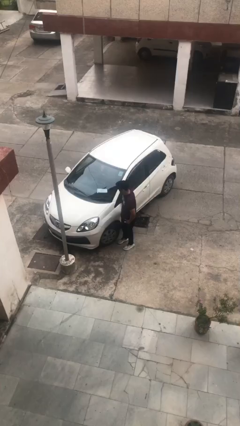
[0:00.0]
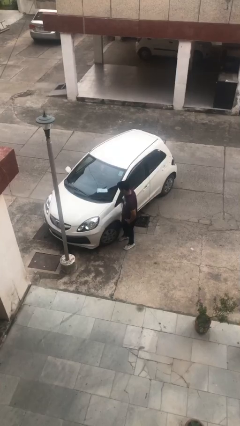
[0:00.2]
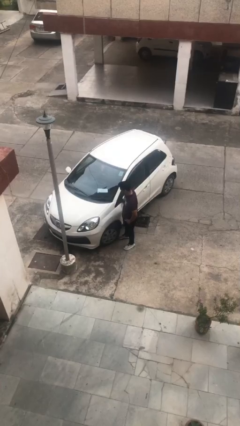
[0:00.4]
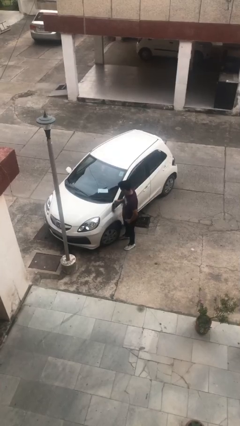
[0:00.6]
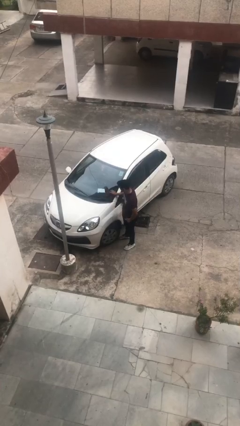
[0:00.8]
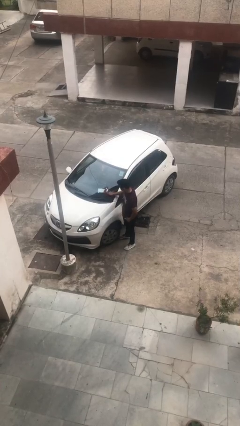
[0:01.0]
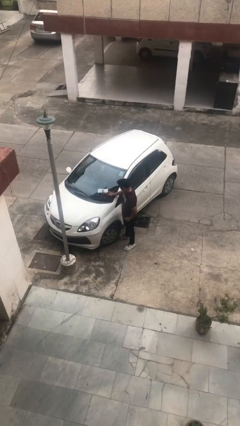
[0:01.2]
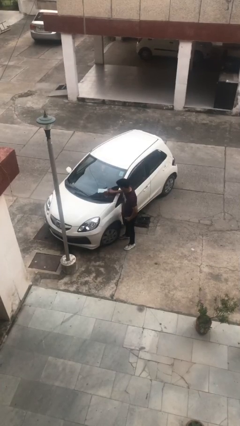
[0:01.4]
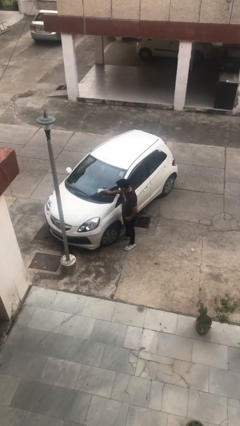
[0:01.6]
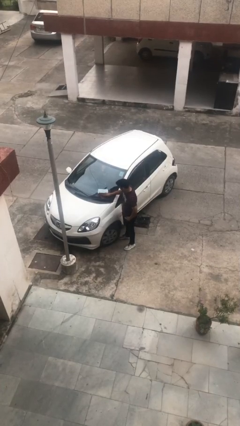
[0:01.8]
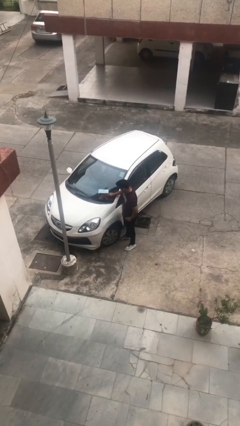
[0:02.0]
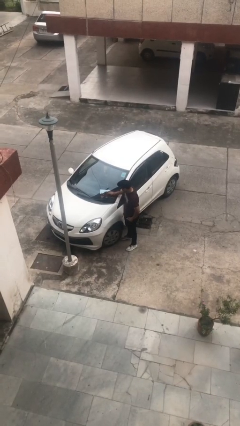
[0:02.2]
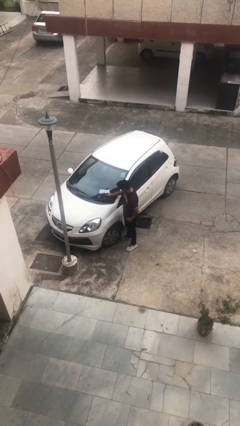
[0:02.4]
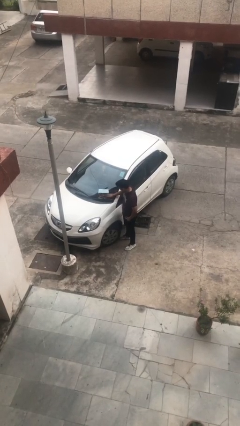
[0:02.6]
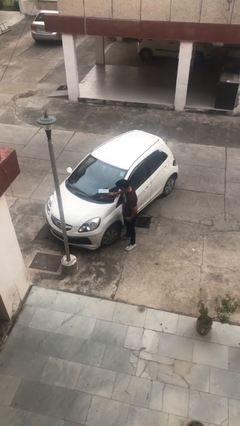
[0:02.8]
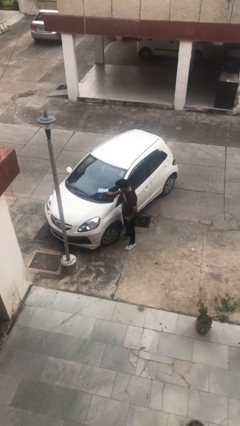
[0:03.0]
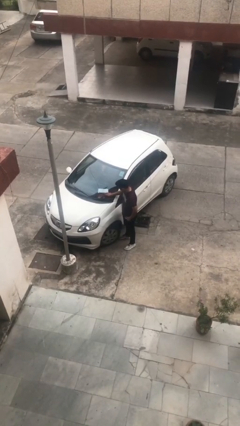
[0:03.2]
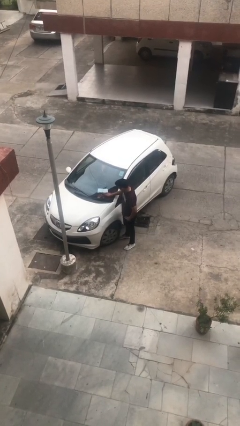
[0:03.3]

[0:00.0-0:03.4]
person polishes car with rag

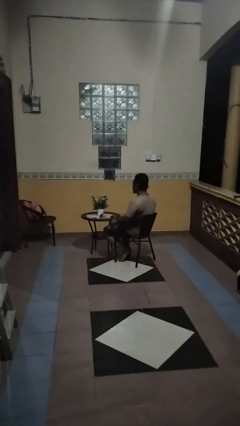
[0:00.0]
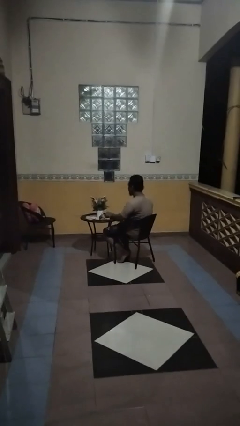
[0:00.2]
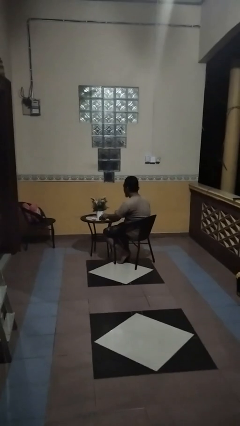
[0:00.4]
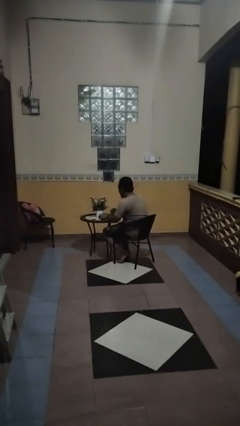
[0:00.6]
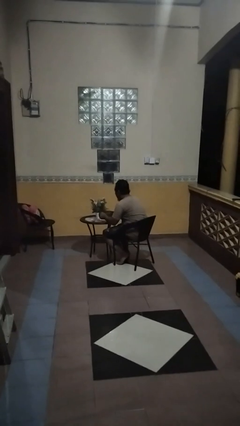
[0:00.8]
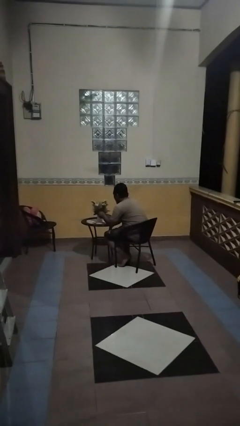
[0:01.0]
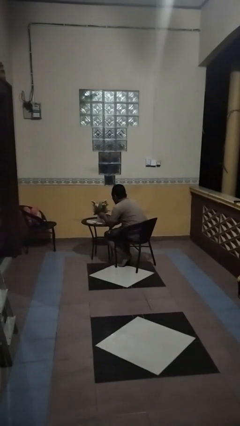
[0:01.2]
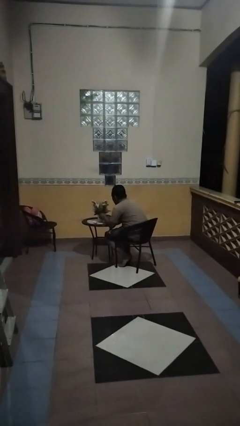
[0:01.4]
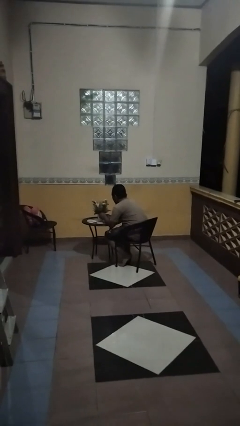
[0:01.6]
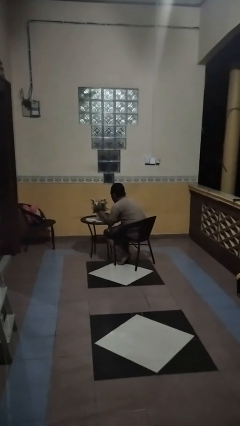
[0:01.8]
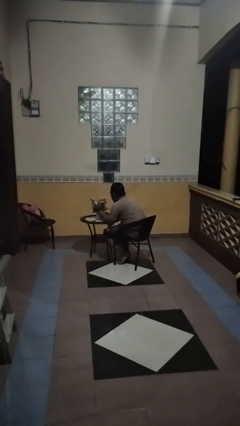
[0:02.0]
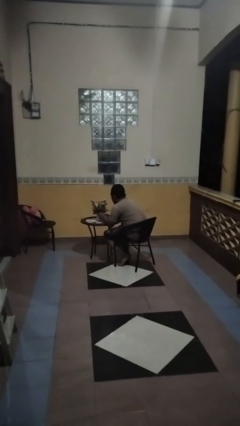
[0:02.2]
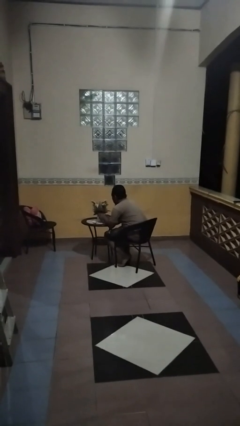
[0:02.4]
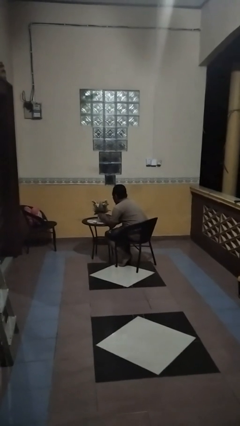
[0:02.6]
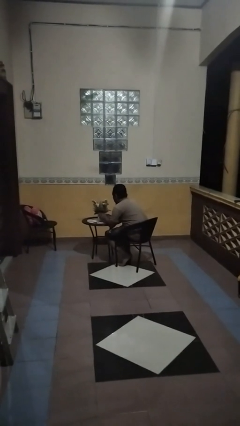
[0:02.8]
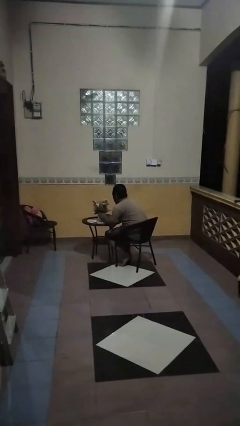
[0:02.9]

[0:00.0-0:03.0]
person arranges flowers in vase

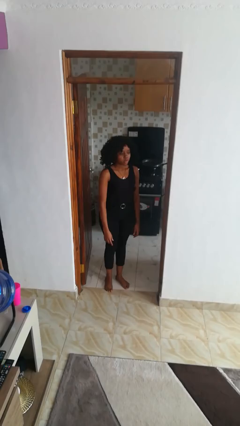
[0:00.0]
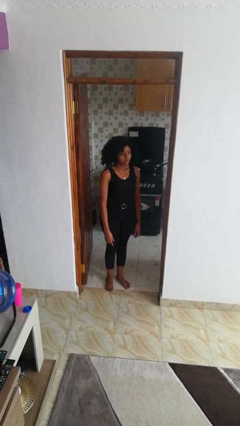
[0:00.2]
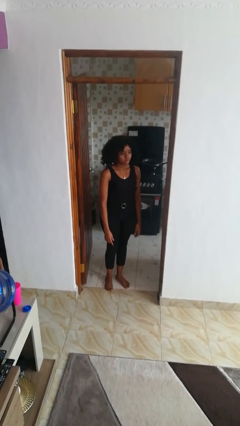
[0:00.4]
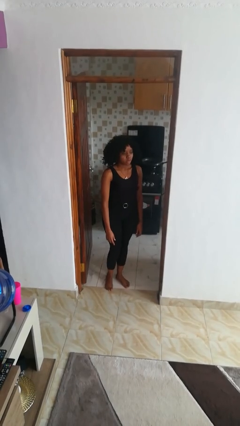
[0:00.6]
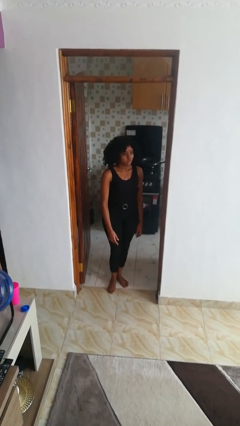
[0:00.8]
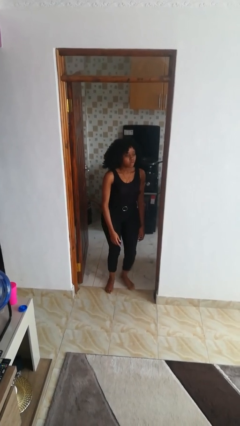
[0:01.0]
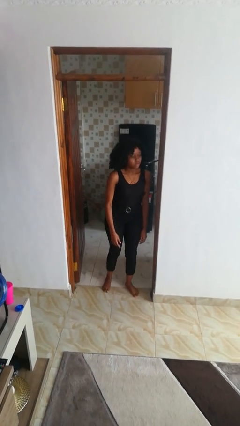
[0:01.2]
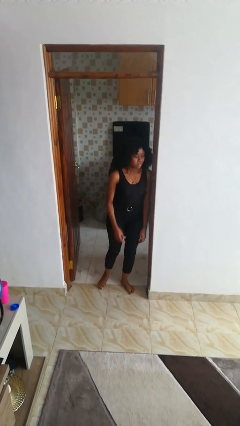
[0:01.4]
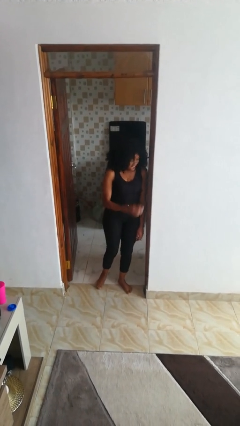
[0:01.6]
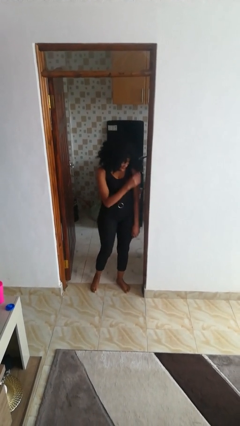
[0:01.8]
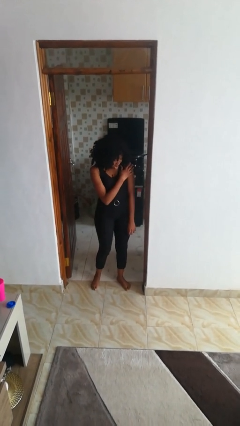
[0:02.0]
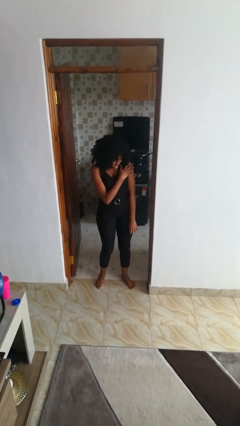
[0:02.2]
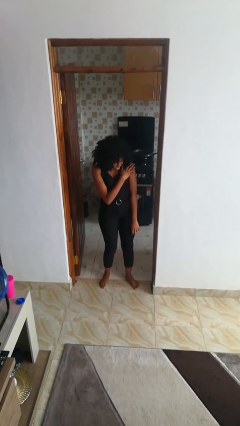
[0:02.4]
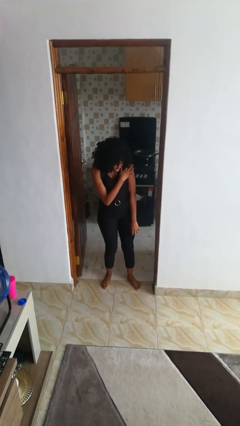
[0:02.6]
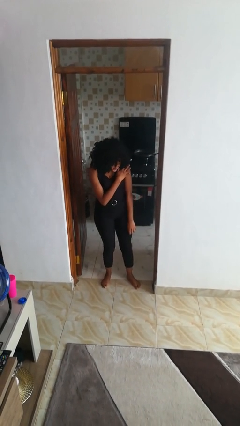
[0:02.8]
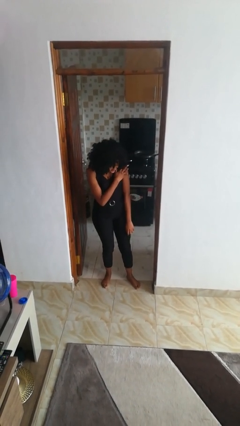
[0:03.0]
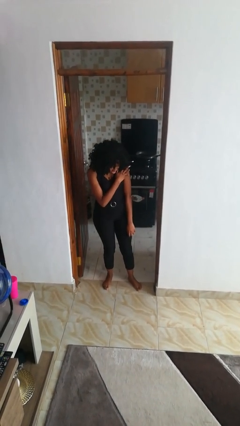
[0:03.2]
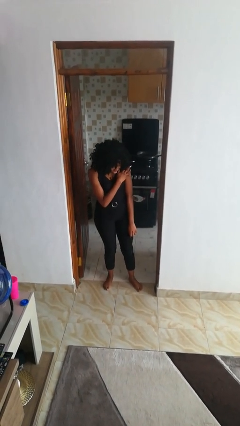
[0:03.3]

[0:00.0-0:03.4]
person bumps into wall

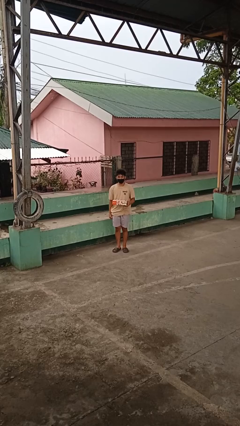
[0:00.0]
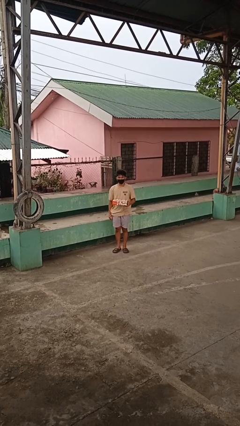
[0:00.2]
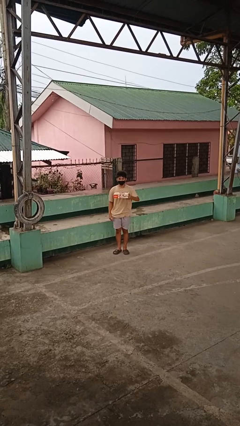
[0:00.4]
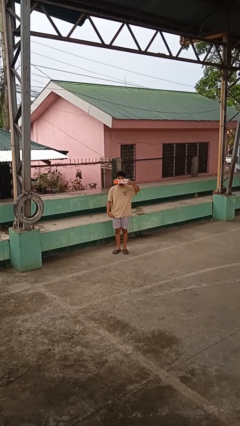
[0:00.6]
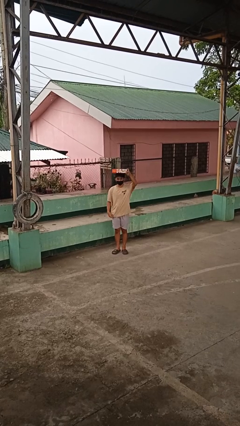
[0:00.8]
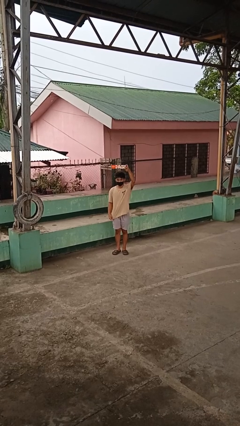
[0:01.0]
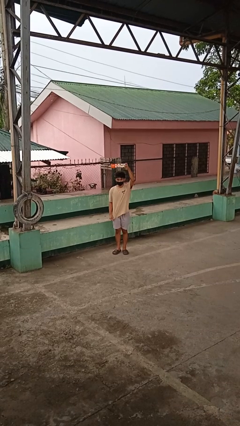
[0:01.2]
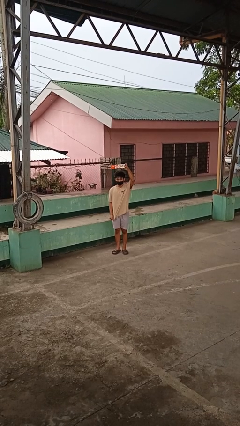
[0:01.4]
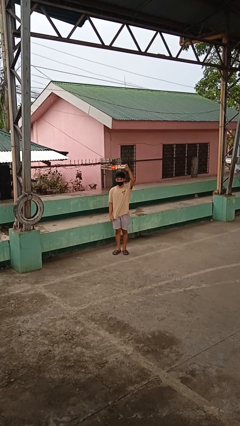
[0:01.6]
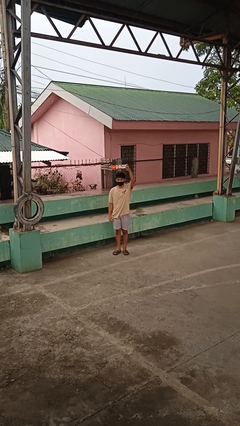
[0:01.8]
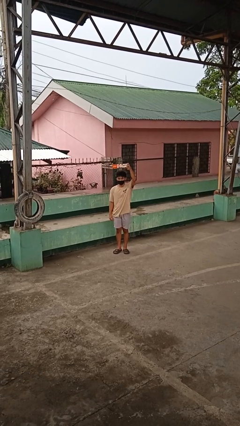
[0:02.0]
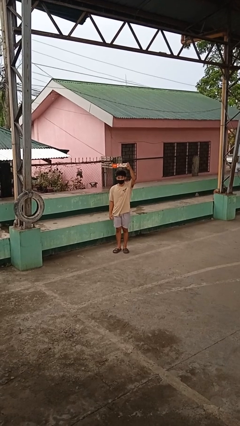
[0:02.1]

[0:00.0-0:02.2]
person holds object above head

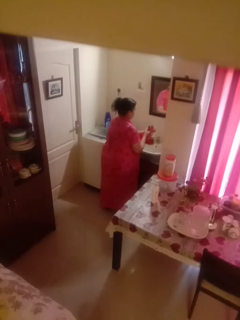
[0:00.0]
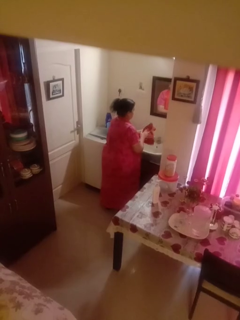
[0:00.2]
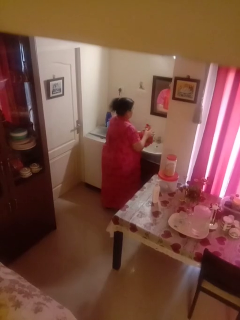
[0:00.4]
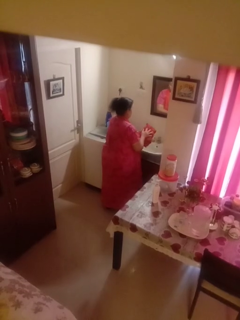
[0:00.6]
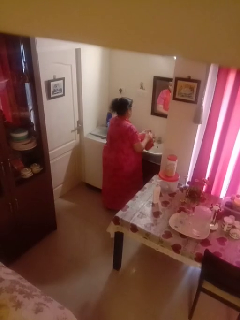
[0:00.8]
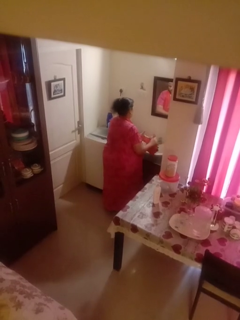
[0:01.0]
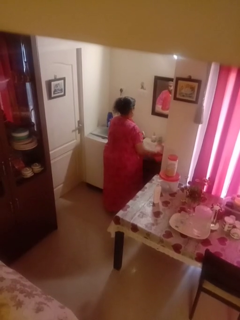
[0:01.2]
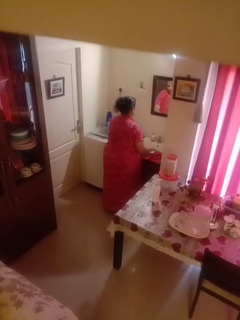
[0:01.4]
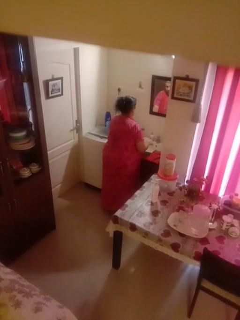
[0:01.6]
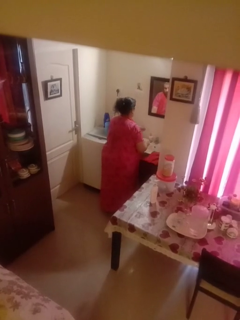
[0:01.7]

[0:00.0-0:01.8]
person dries hands with towel

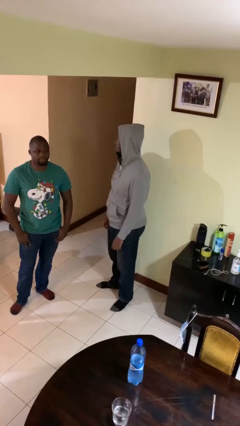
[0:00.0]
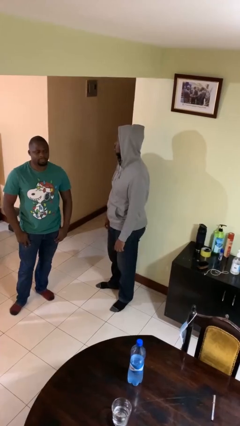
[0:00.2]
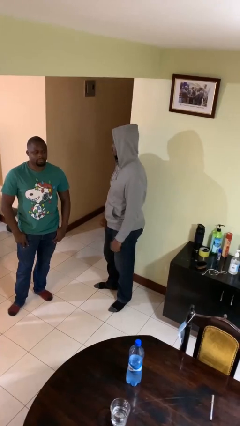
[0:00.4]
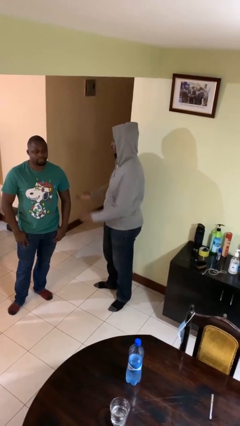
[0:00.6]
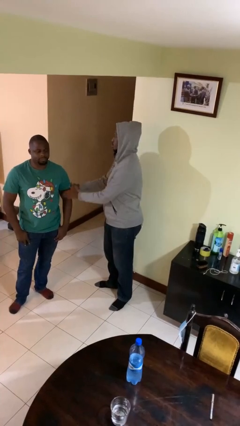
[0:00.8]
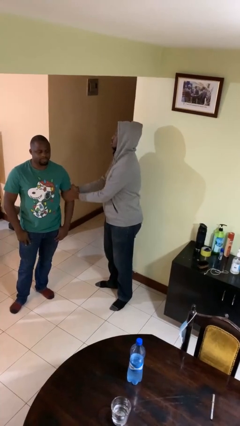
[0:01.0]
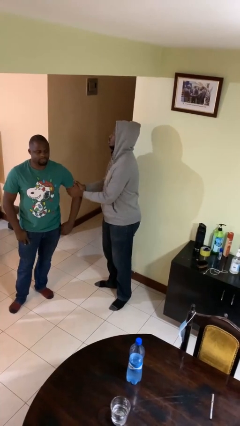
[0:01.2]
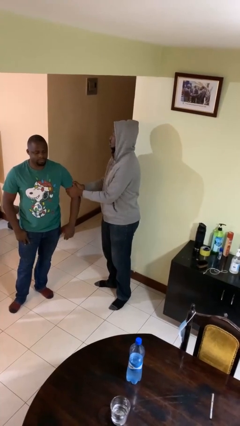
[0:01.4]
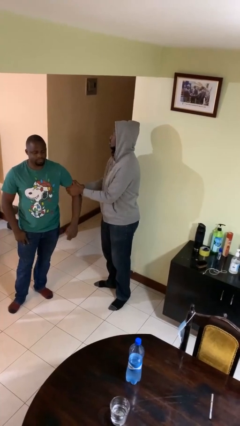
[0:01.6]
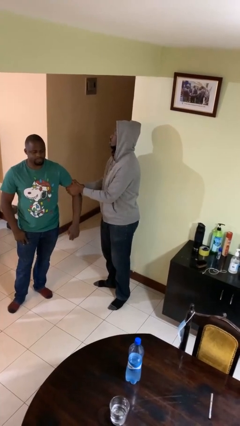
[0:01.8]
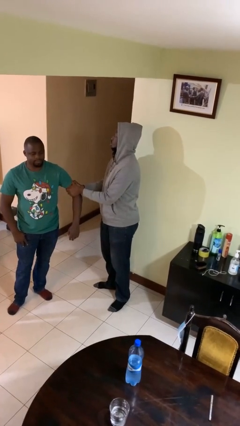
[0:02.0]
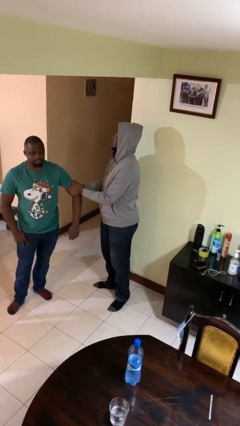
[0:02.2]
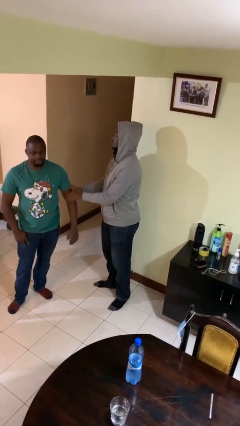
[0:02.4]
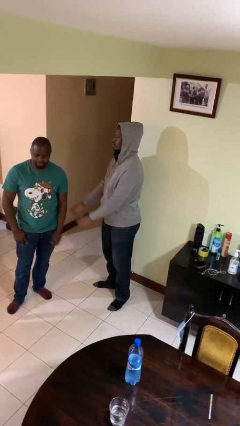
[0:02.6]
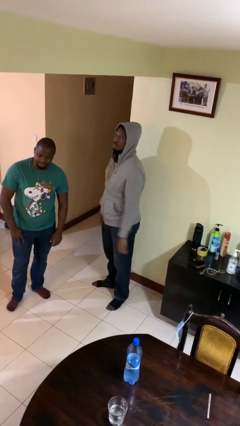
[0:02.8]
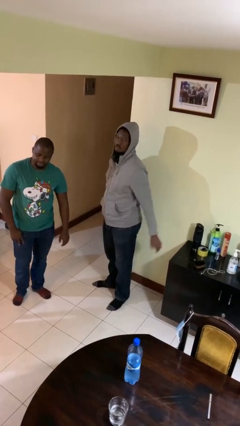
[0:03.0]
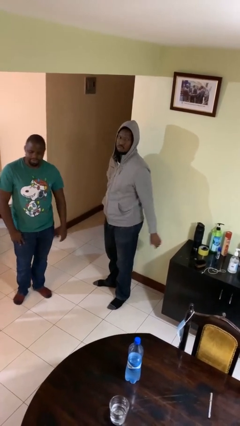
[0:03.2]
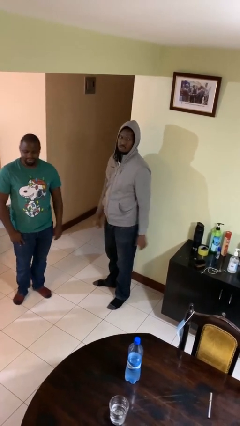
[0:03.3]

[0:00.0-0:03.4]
person grabs person by bicep

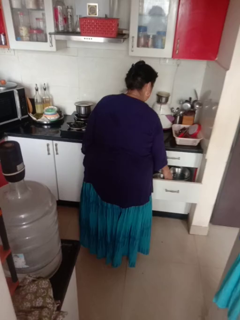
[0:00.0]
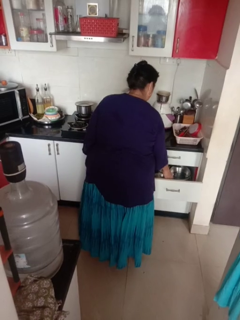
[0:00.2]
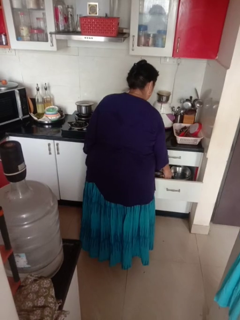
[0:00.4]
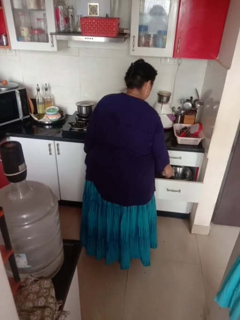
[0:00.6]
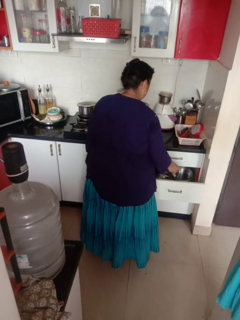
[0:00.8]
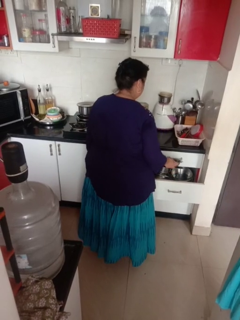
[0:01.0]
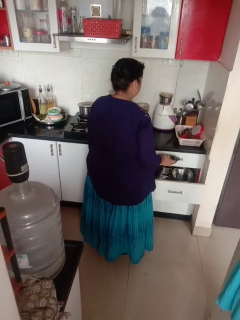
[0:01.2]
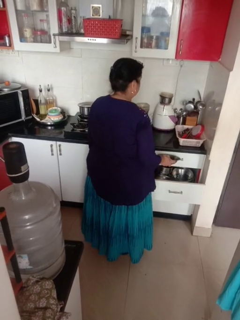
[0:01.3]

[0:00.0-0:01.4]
person takes object from kitchen drawer
